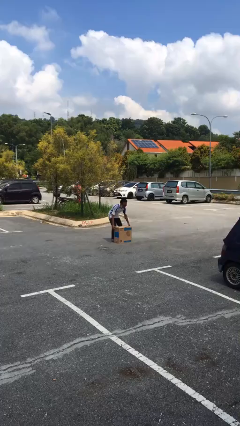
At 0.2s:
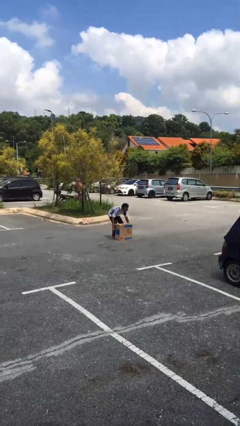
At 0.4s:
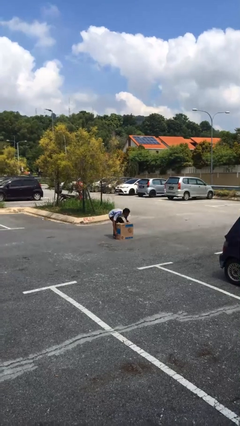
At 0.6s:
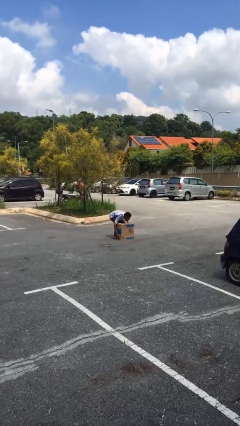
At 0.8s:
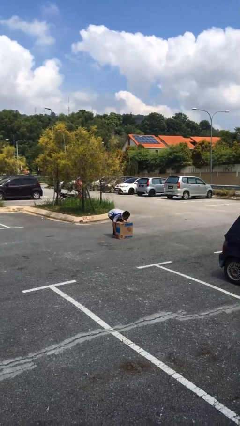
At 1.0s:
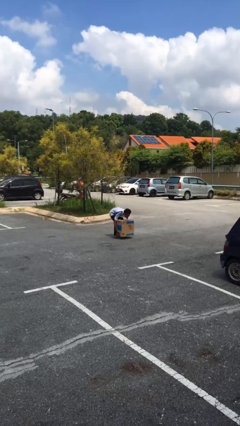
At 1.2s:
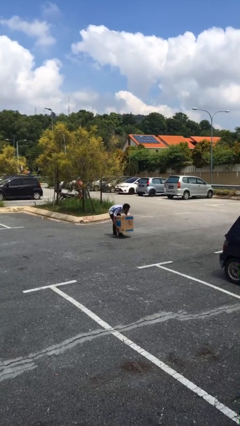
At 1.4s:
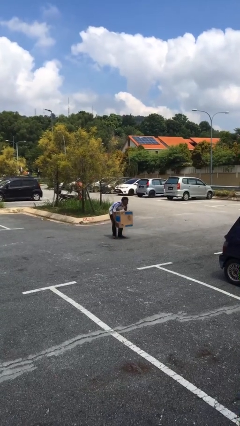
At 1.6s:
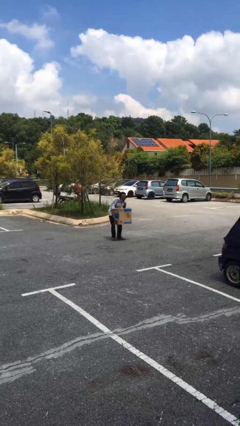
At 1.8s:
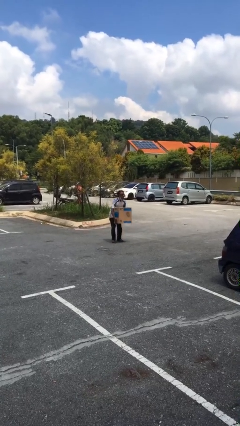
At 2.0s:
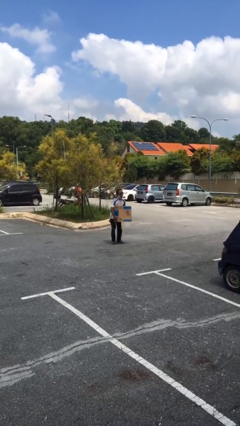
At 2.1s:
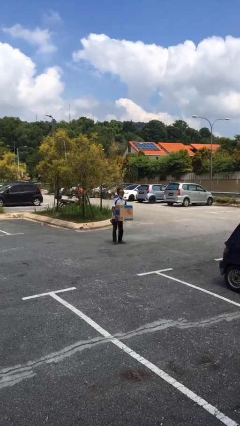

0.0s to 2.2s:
person picks up object from floor

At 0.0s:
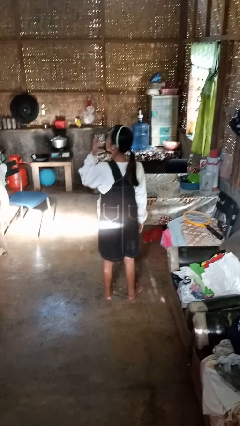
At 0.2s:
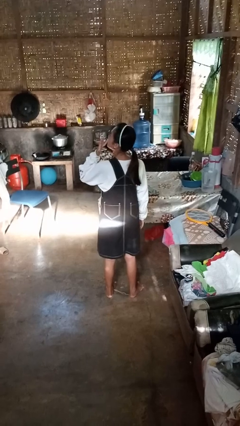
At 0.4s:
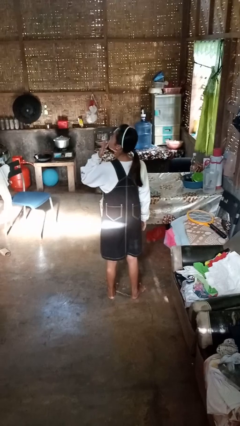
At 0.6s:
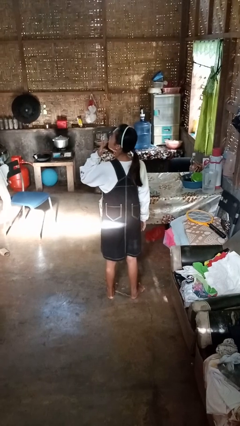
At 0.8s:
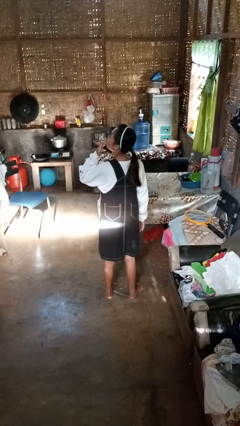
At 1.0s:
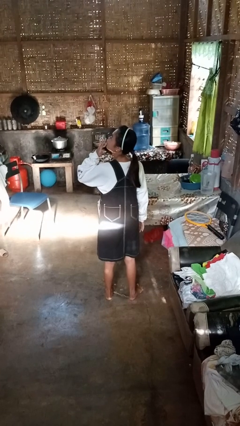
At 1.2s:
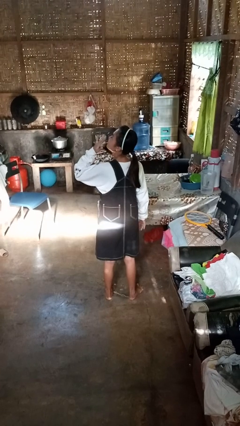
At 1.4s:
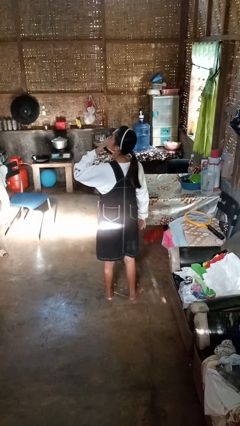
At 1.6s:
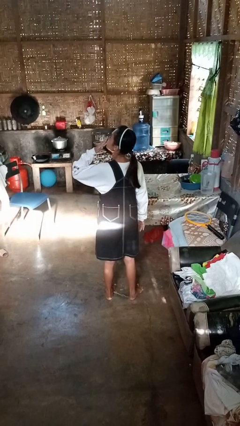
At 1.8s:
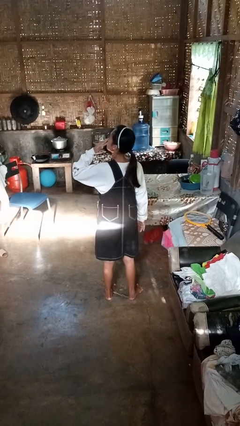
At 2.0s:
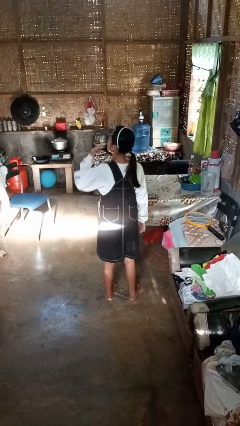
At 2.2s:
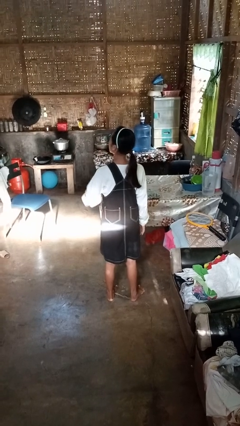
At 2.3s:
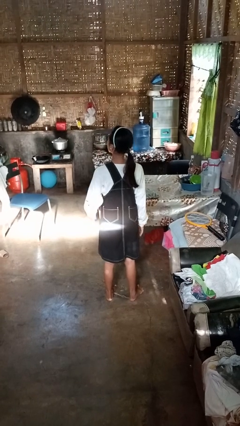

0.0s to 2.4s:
person licks fingers

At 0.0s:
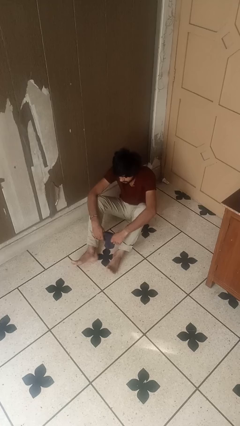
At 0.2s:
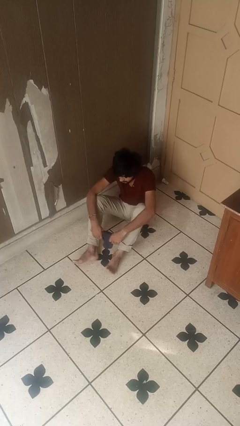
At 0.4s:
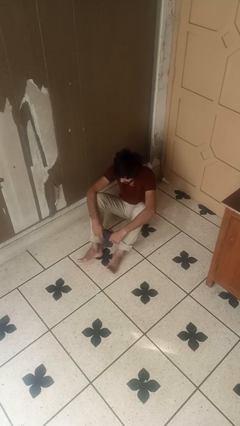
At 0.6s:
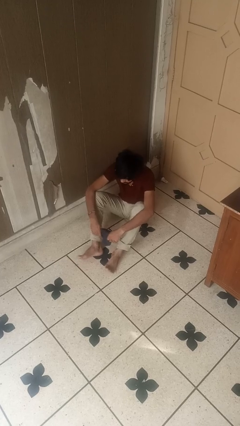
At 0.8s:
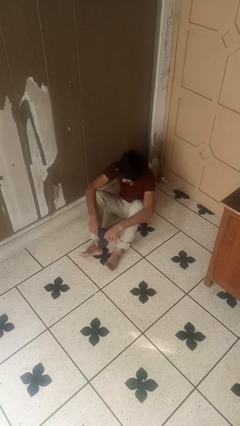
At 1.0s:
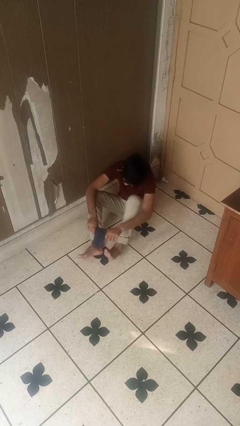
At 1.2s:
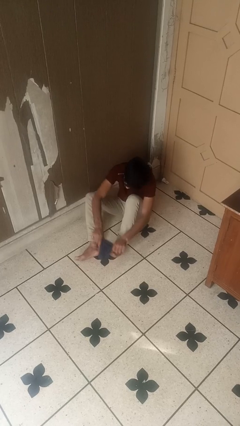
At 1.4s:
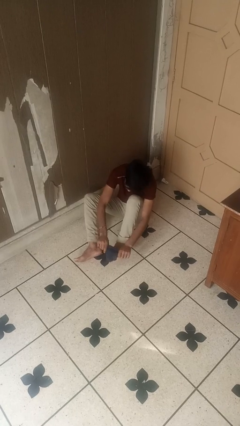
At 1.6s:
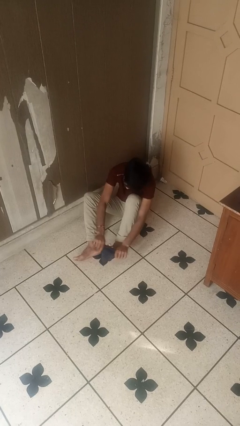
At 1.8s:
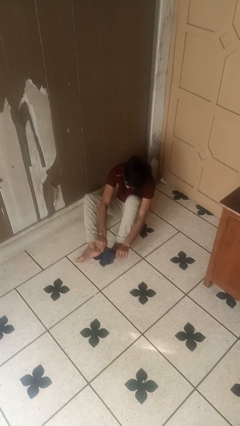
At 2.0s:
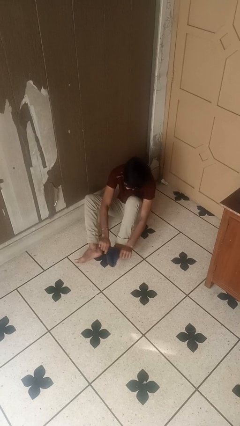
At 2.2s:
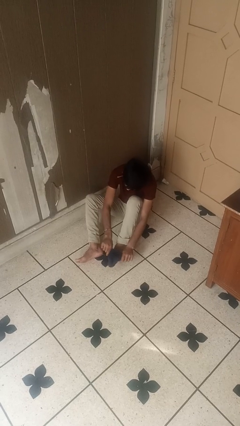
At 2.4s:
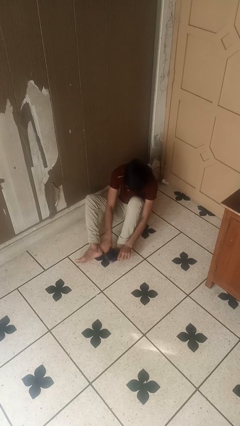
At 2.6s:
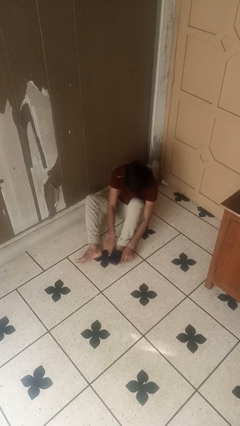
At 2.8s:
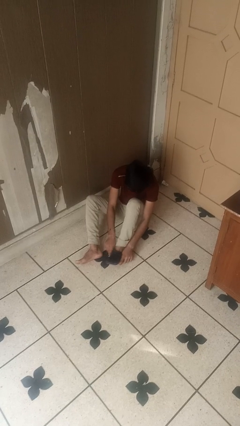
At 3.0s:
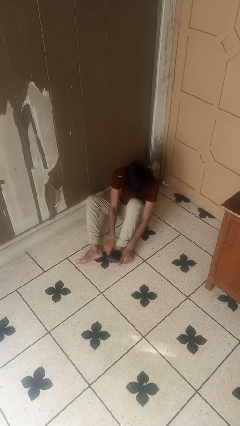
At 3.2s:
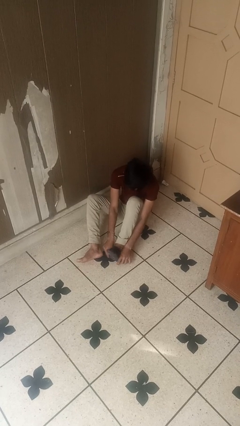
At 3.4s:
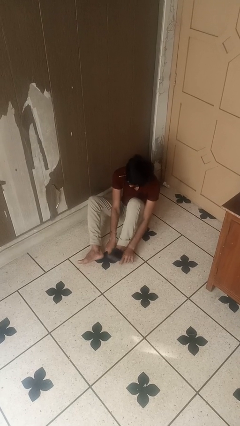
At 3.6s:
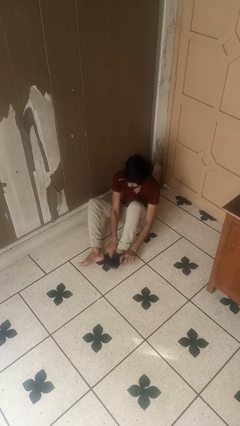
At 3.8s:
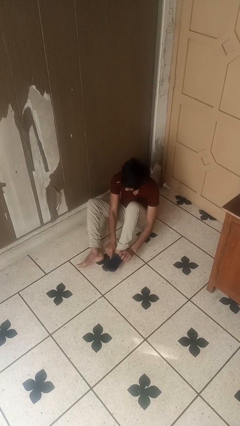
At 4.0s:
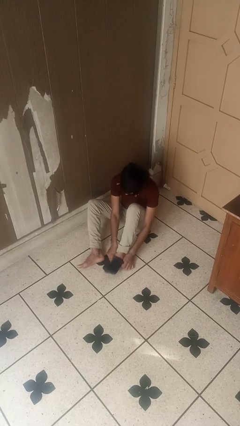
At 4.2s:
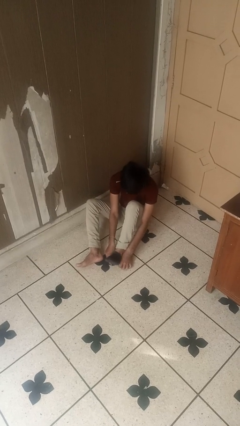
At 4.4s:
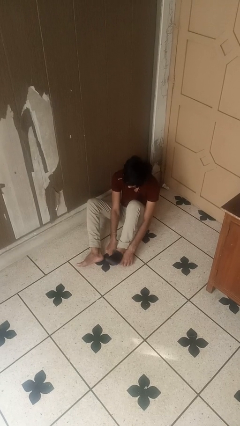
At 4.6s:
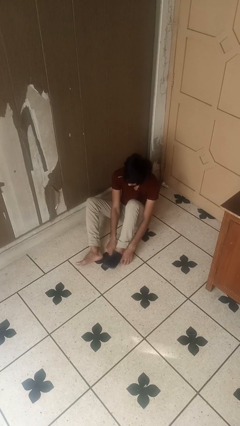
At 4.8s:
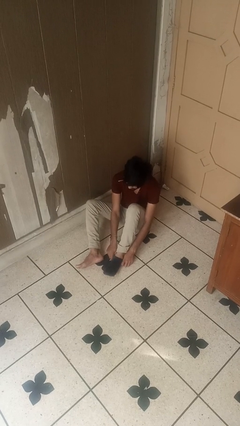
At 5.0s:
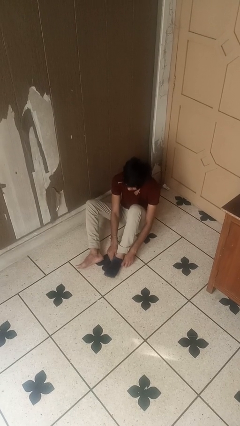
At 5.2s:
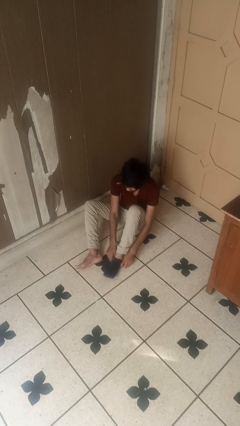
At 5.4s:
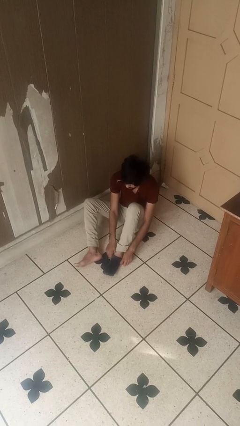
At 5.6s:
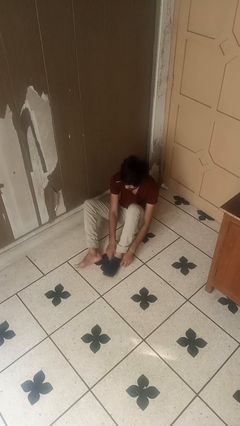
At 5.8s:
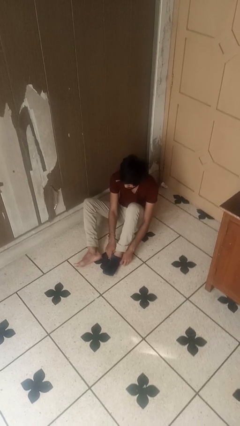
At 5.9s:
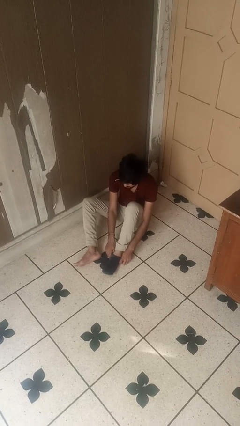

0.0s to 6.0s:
person puts on socks

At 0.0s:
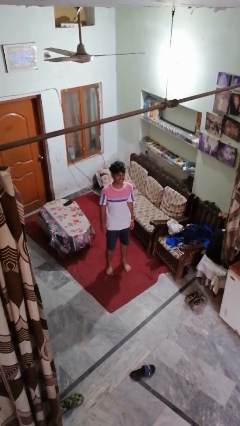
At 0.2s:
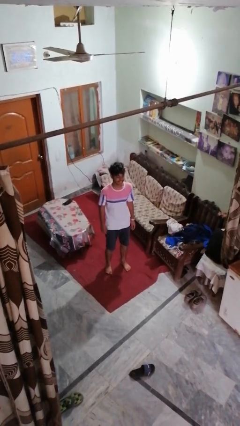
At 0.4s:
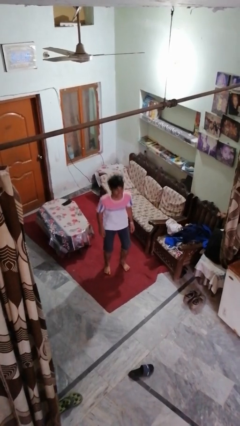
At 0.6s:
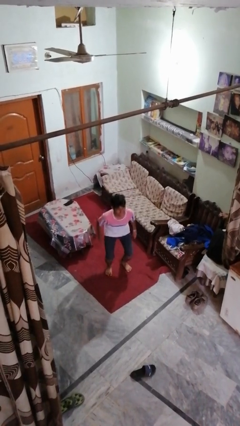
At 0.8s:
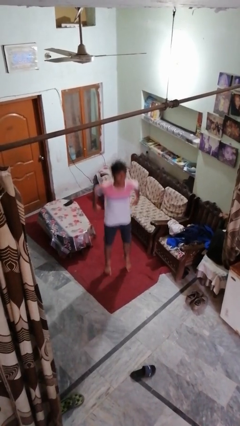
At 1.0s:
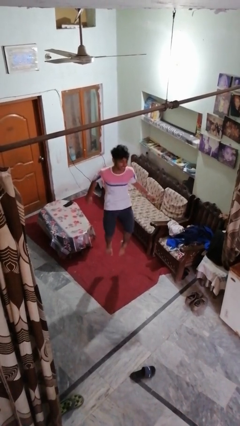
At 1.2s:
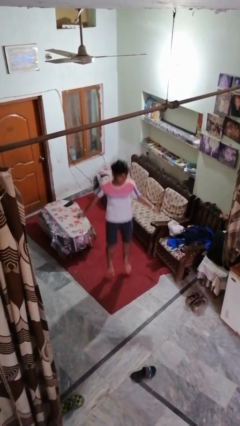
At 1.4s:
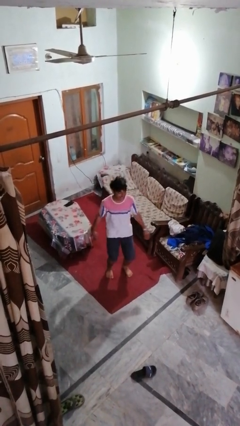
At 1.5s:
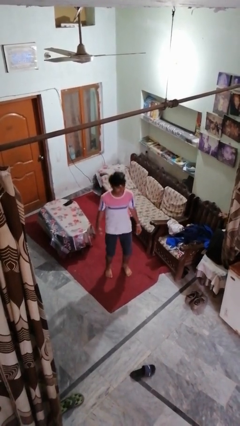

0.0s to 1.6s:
person jumps

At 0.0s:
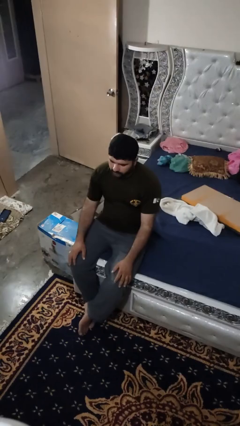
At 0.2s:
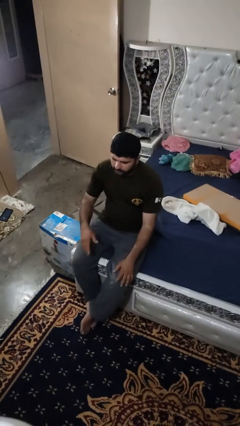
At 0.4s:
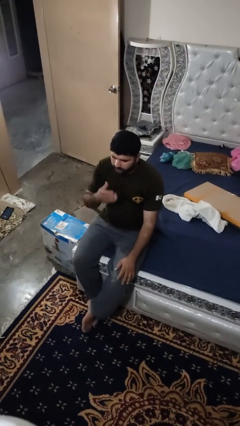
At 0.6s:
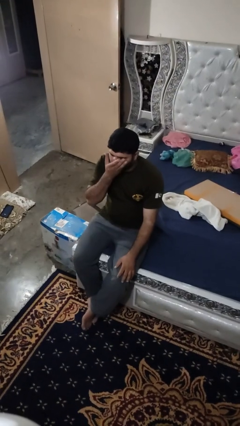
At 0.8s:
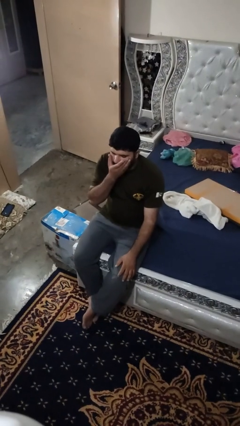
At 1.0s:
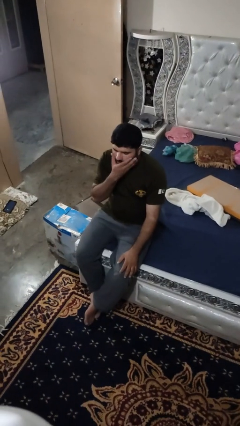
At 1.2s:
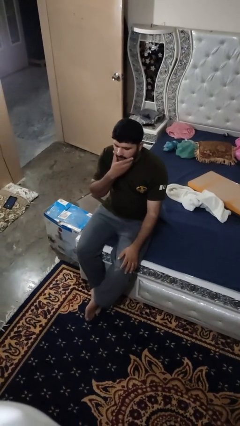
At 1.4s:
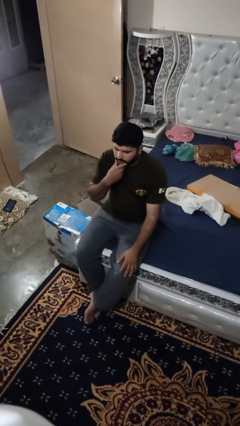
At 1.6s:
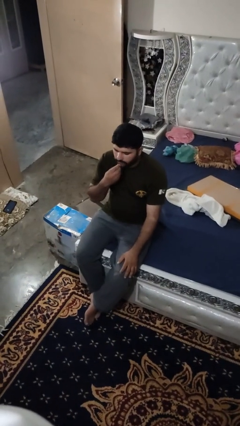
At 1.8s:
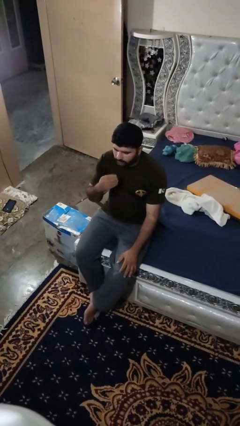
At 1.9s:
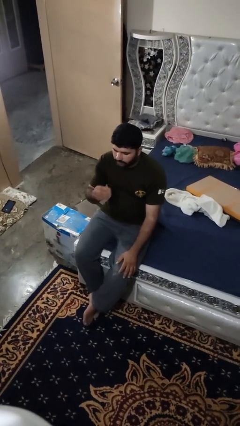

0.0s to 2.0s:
person strokes chin

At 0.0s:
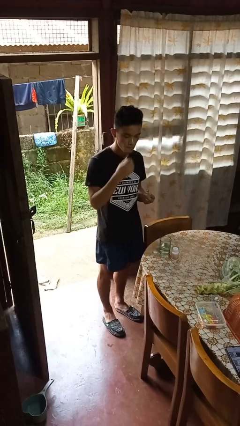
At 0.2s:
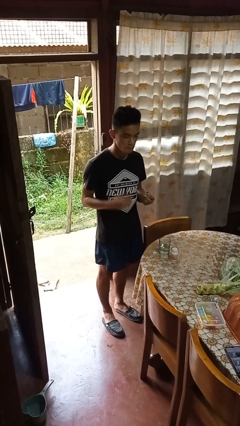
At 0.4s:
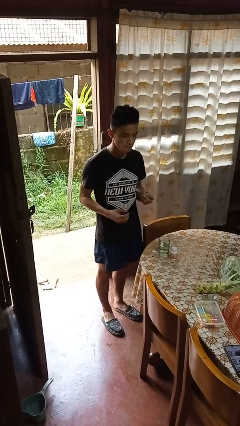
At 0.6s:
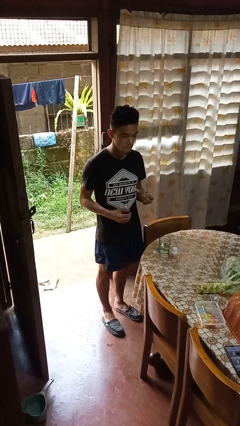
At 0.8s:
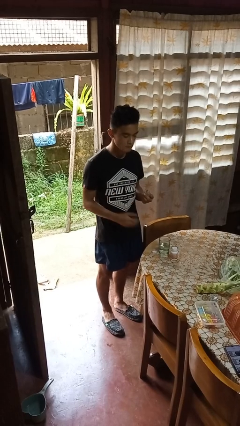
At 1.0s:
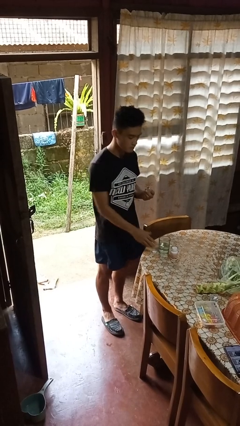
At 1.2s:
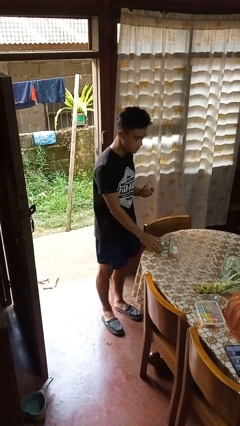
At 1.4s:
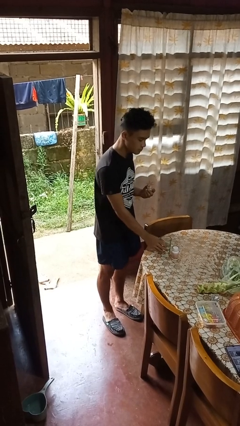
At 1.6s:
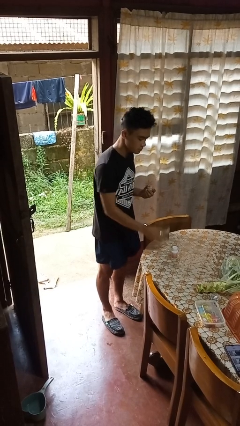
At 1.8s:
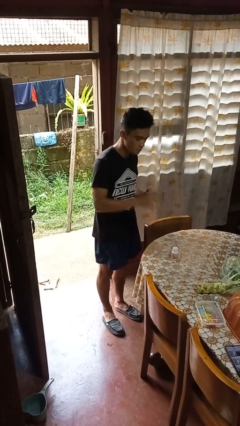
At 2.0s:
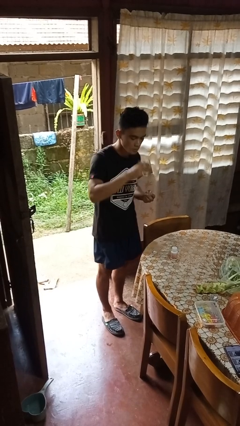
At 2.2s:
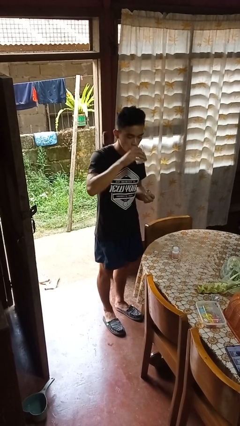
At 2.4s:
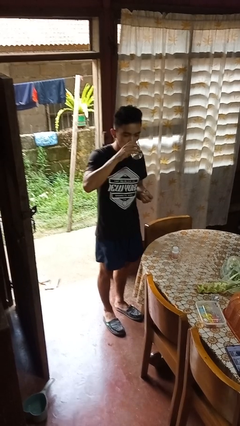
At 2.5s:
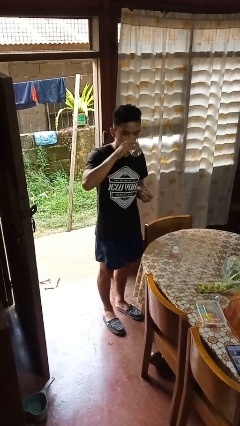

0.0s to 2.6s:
person takes medicine pills

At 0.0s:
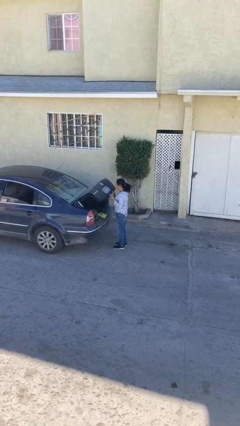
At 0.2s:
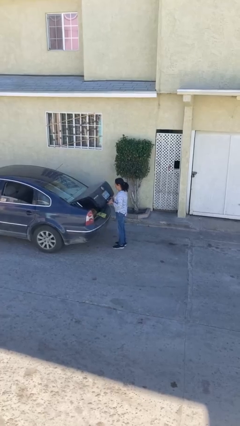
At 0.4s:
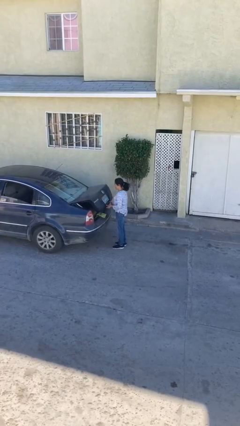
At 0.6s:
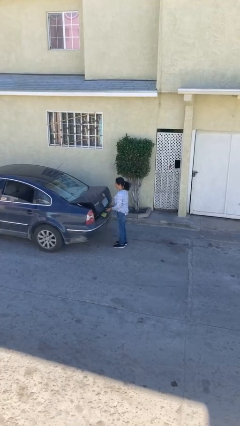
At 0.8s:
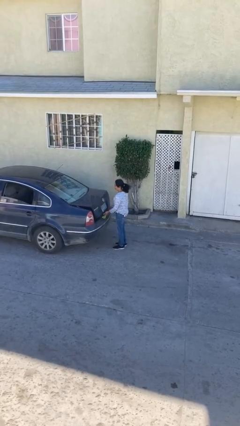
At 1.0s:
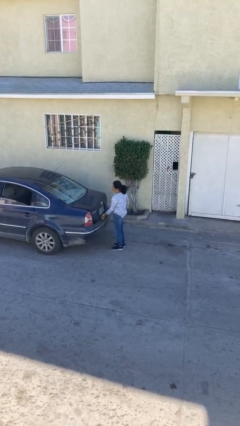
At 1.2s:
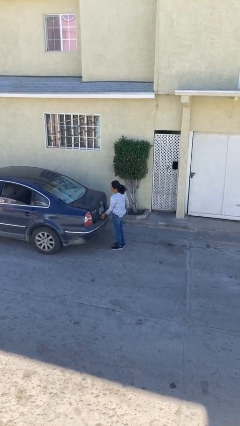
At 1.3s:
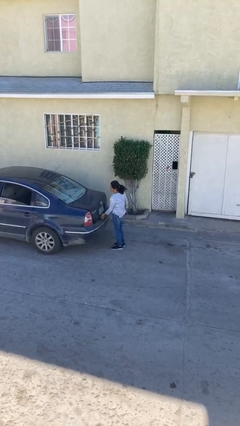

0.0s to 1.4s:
person closes car trunk
